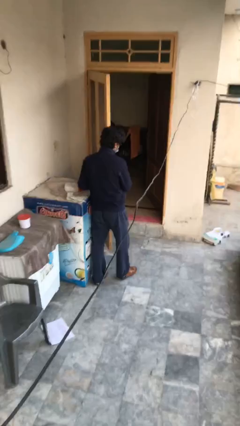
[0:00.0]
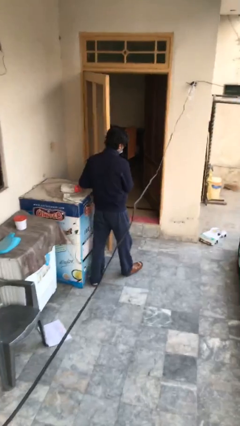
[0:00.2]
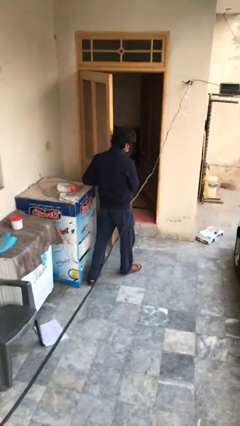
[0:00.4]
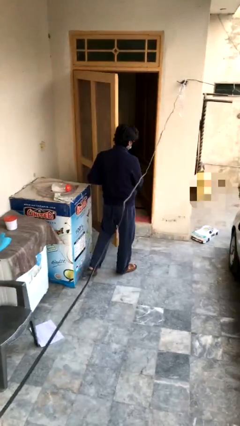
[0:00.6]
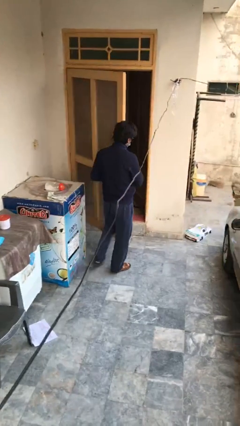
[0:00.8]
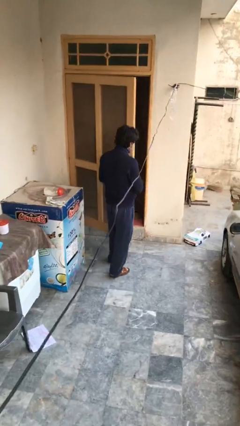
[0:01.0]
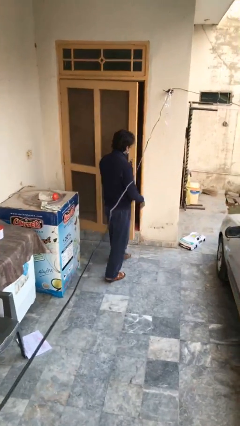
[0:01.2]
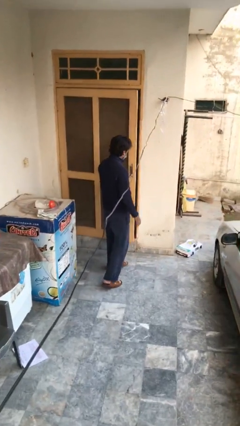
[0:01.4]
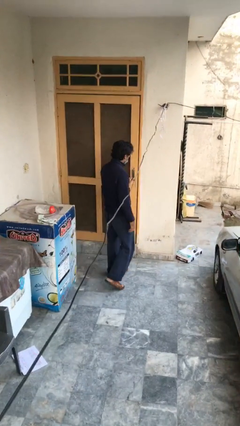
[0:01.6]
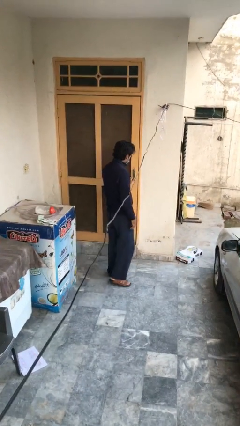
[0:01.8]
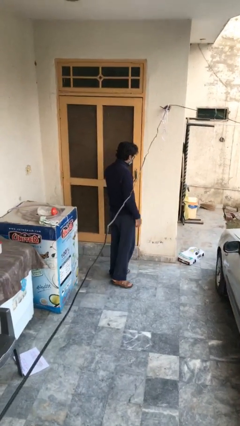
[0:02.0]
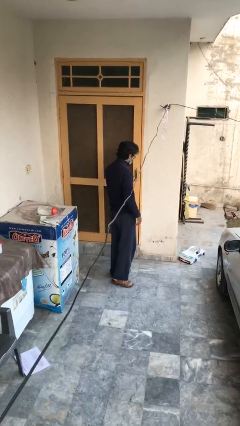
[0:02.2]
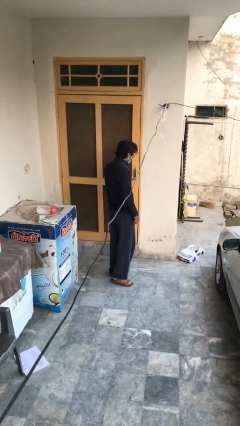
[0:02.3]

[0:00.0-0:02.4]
person closes facility door

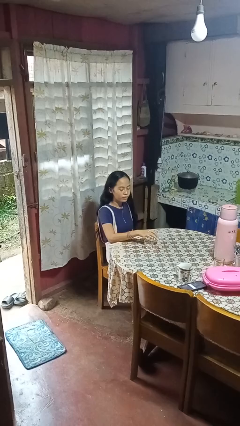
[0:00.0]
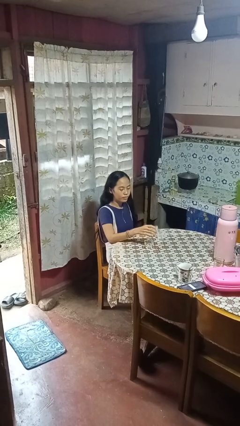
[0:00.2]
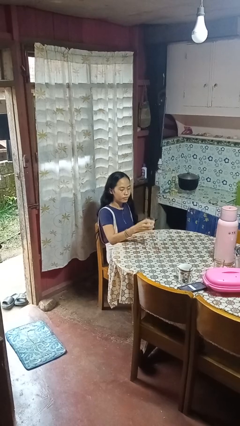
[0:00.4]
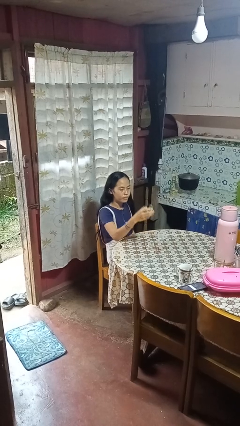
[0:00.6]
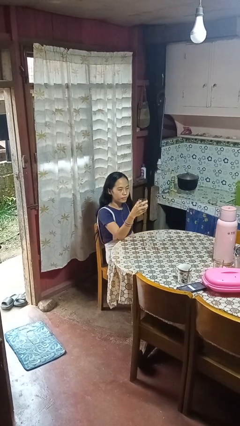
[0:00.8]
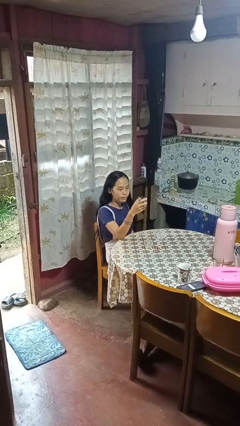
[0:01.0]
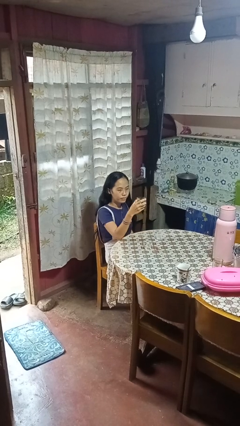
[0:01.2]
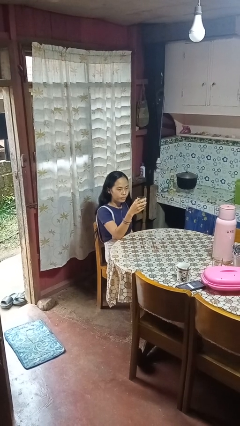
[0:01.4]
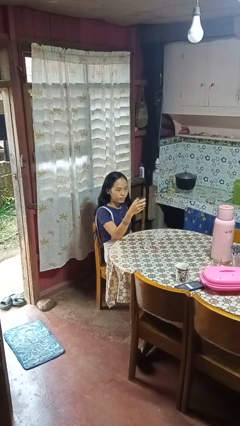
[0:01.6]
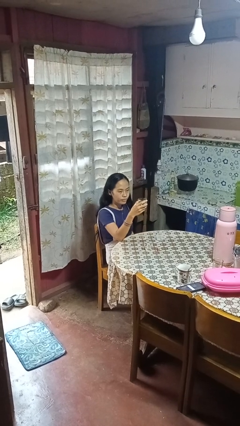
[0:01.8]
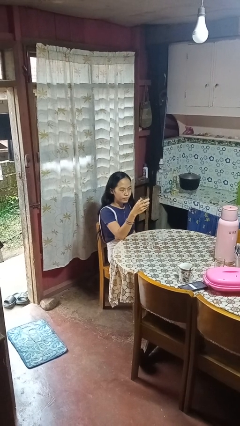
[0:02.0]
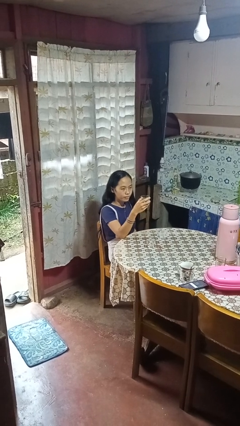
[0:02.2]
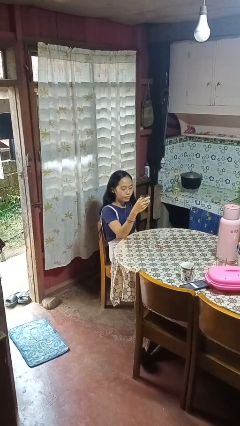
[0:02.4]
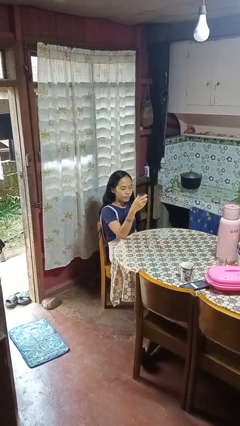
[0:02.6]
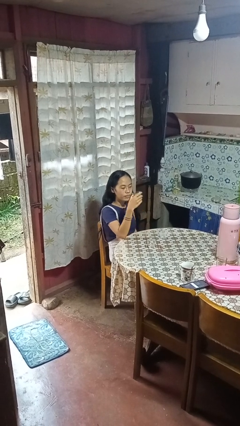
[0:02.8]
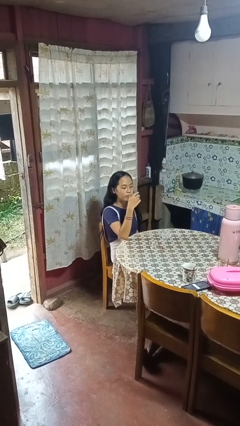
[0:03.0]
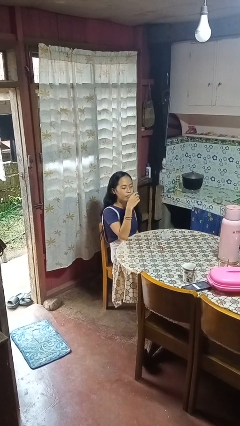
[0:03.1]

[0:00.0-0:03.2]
person picks up object from table

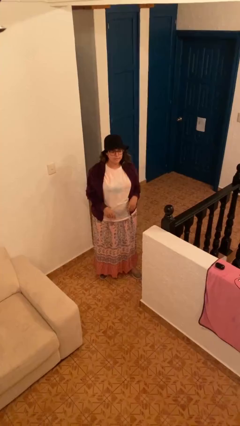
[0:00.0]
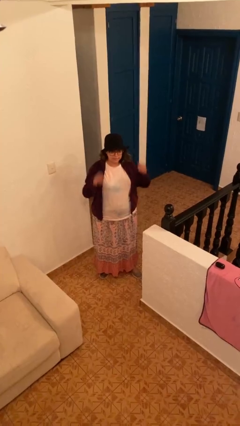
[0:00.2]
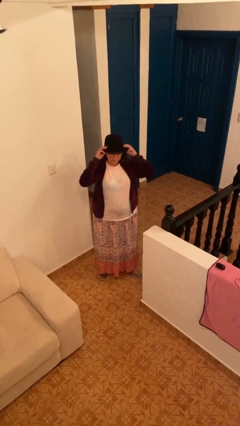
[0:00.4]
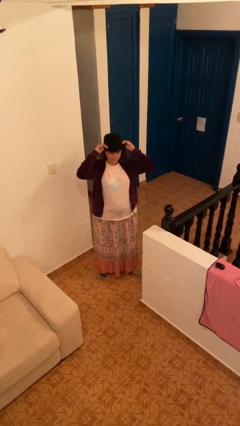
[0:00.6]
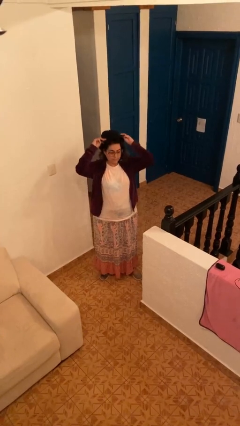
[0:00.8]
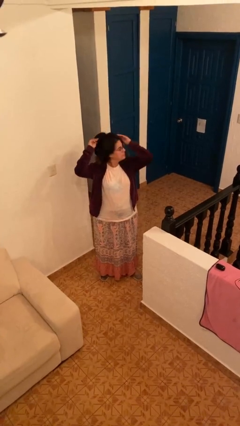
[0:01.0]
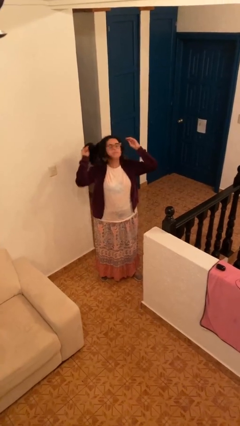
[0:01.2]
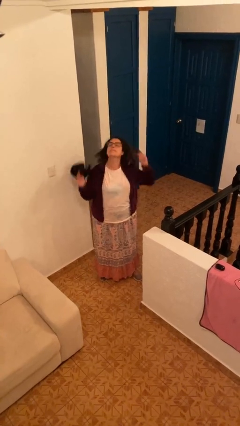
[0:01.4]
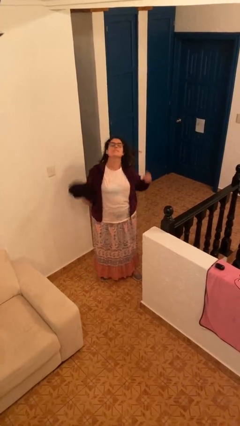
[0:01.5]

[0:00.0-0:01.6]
person takes off hat

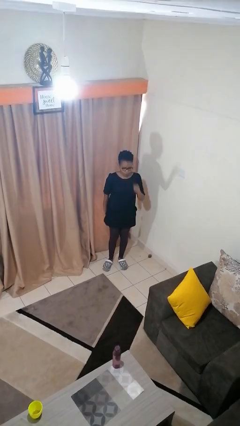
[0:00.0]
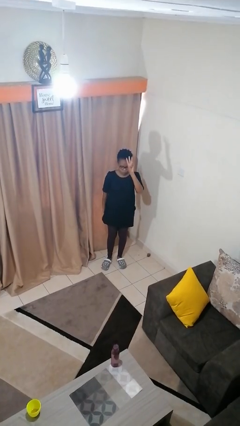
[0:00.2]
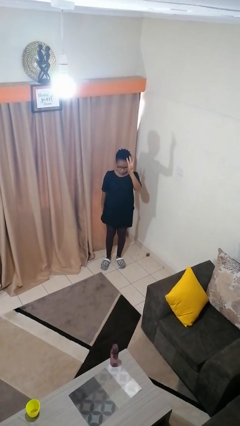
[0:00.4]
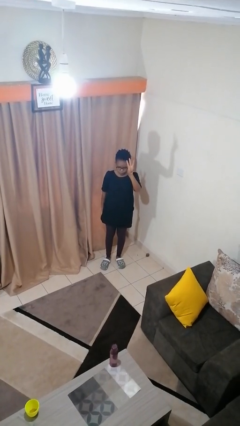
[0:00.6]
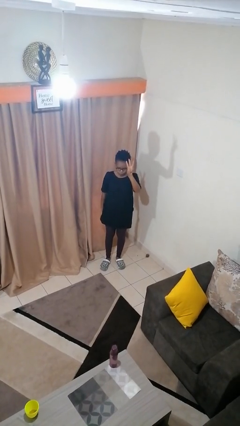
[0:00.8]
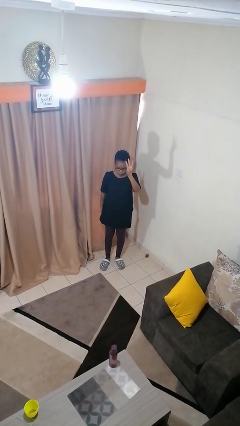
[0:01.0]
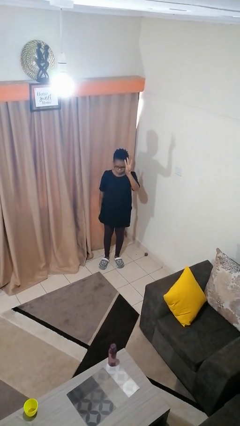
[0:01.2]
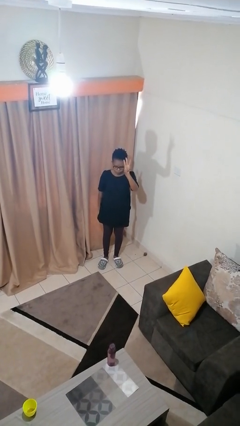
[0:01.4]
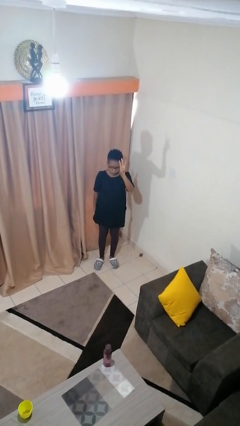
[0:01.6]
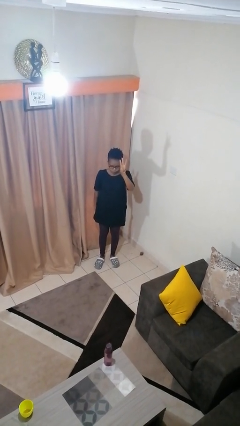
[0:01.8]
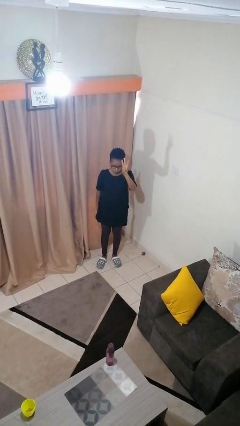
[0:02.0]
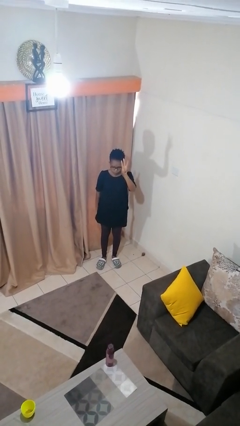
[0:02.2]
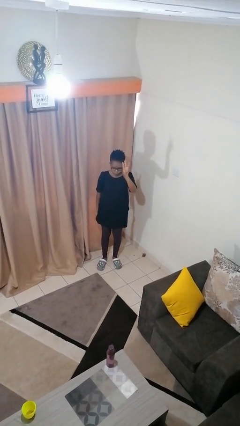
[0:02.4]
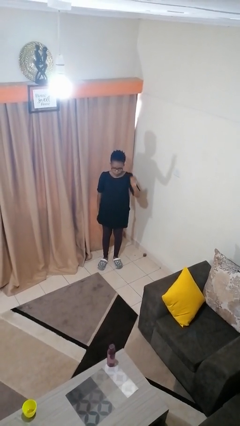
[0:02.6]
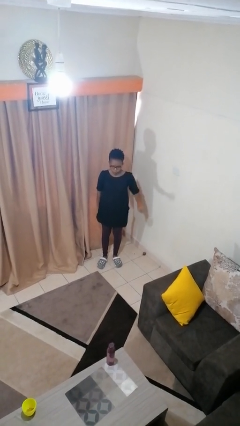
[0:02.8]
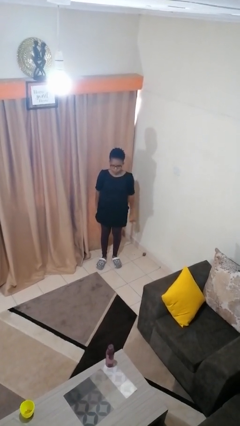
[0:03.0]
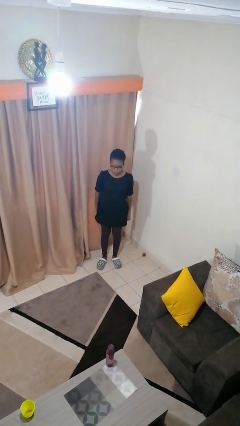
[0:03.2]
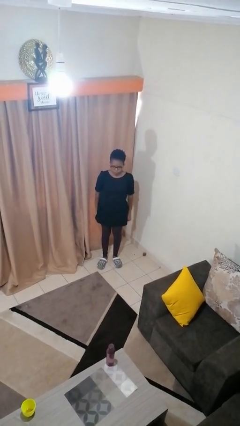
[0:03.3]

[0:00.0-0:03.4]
person gestures number three

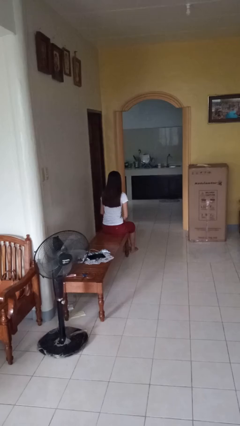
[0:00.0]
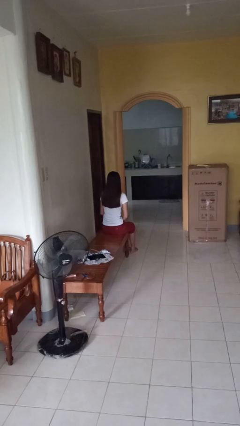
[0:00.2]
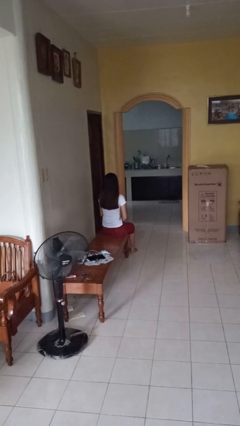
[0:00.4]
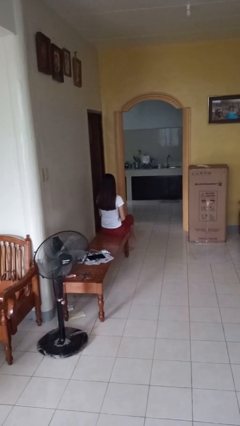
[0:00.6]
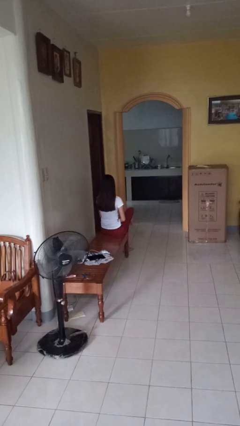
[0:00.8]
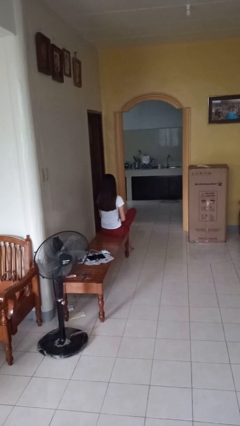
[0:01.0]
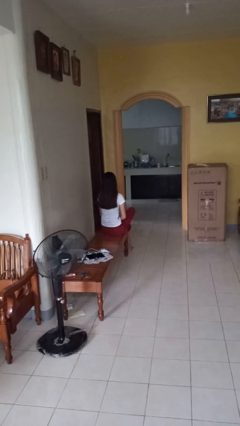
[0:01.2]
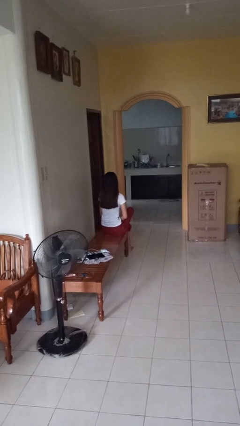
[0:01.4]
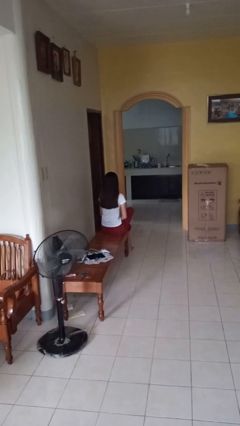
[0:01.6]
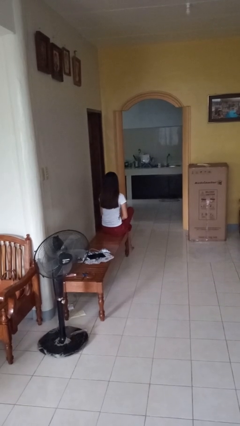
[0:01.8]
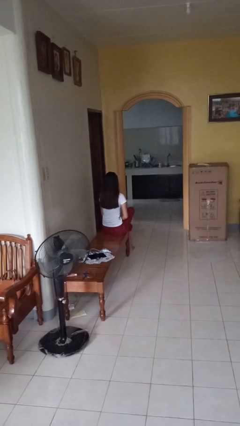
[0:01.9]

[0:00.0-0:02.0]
person crosses legs

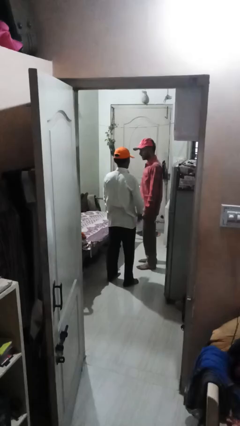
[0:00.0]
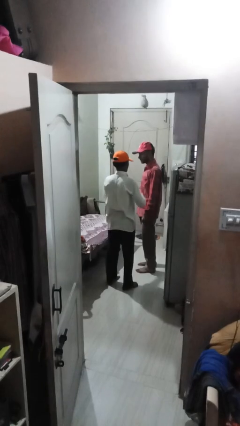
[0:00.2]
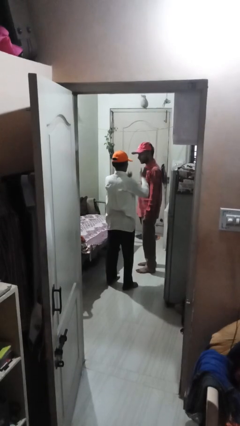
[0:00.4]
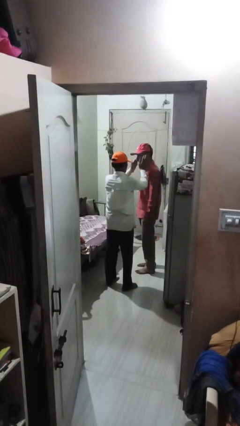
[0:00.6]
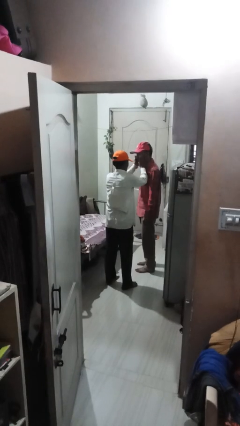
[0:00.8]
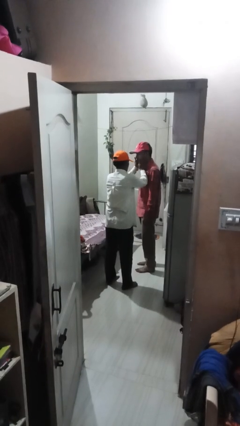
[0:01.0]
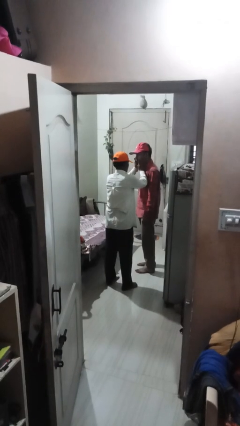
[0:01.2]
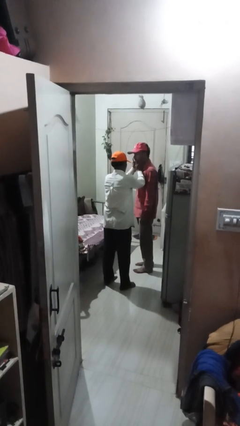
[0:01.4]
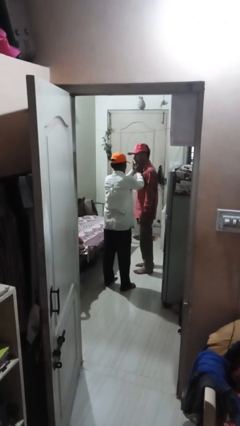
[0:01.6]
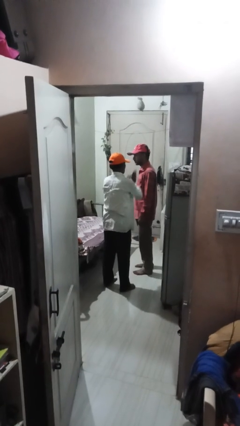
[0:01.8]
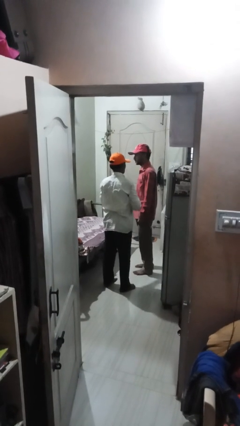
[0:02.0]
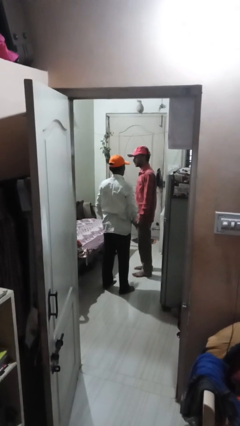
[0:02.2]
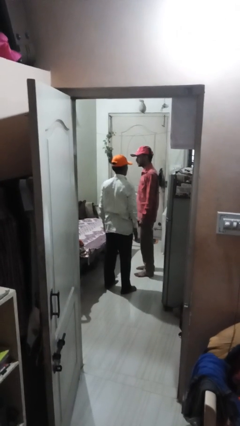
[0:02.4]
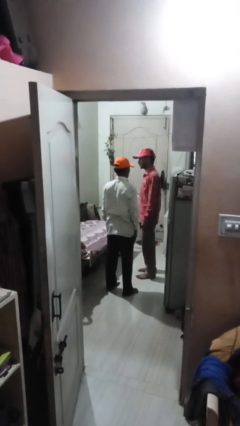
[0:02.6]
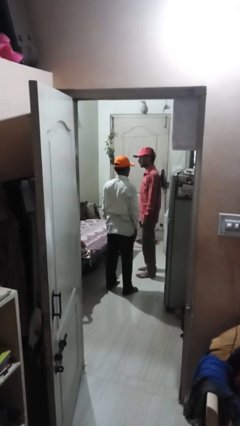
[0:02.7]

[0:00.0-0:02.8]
person touches face of person

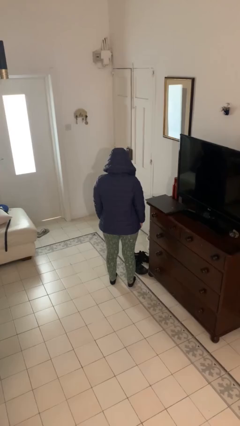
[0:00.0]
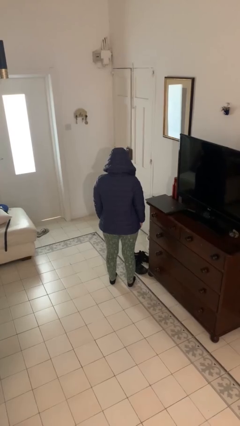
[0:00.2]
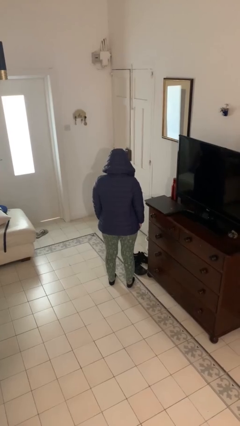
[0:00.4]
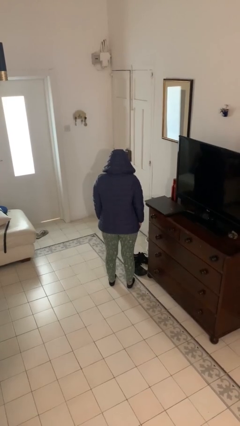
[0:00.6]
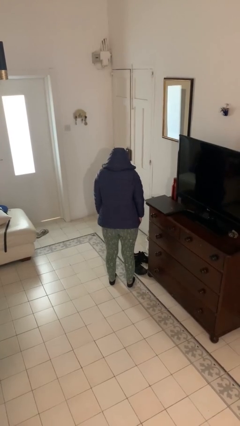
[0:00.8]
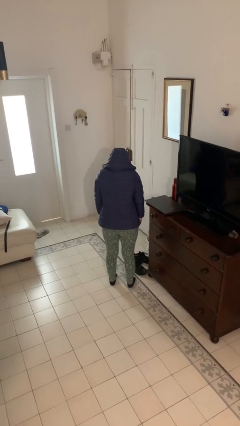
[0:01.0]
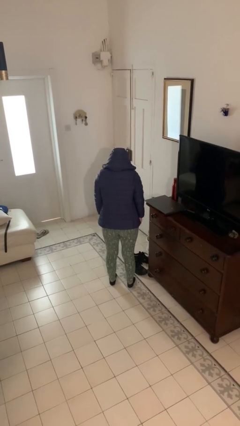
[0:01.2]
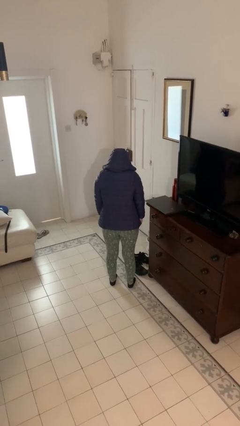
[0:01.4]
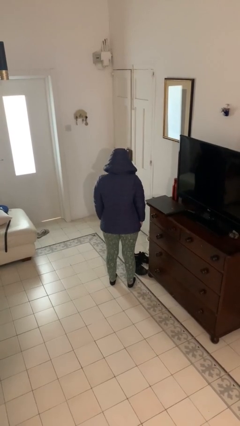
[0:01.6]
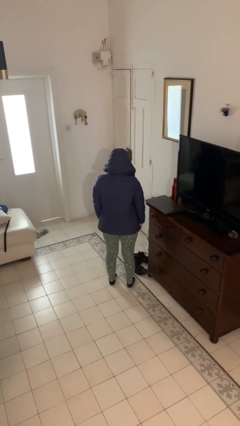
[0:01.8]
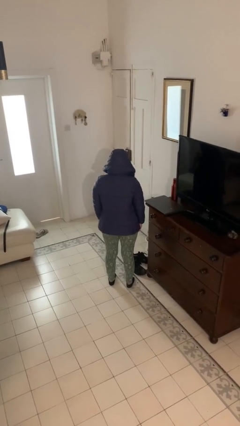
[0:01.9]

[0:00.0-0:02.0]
person shrugs
